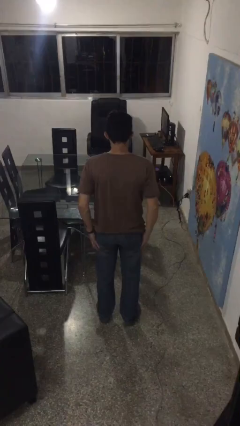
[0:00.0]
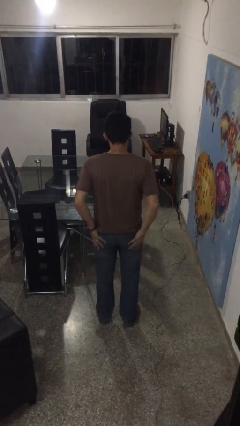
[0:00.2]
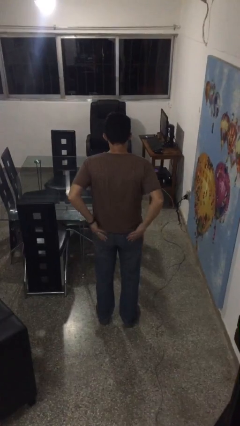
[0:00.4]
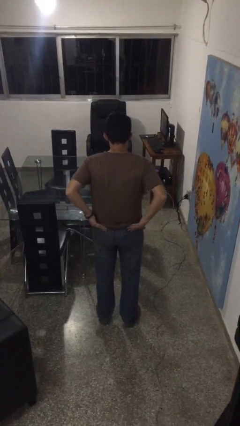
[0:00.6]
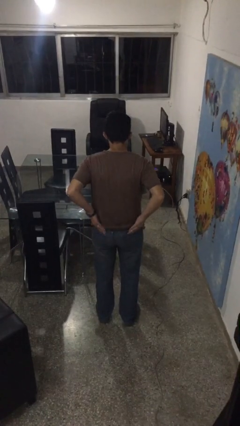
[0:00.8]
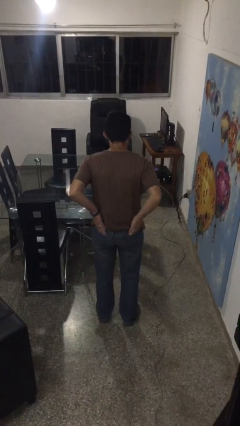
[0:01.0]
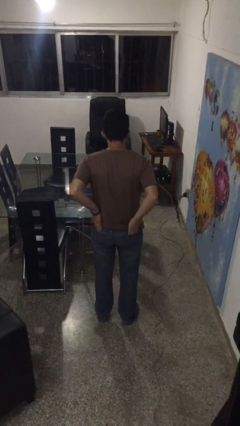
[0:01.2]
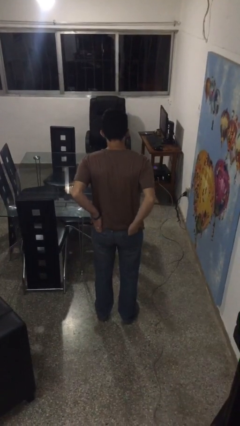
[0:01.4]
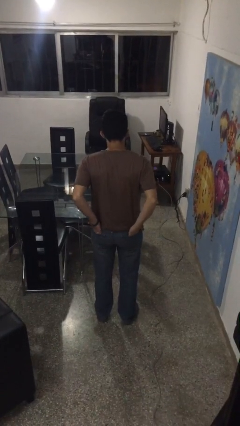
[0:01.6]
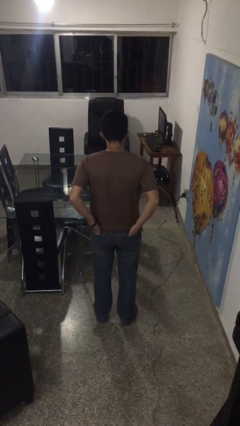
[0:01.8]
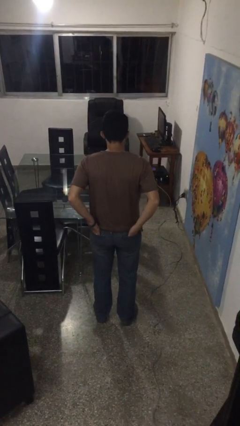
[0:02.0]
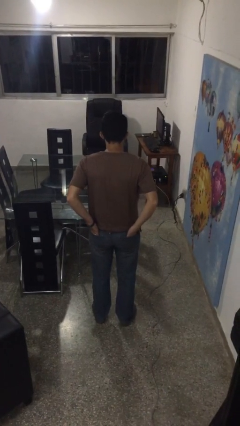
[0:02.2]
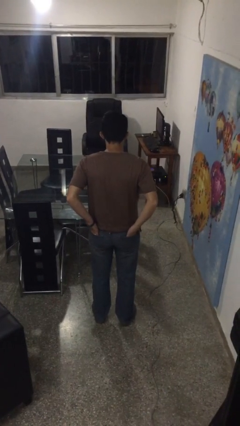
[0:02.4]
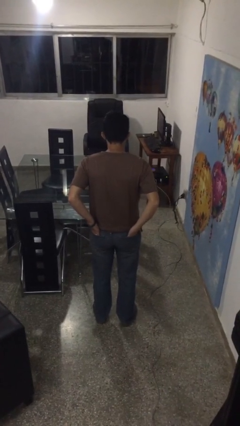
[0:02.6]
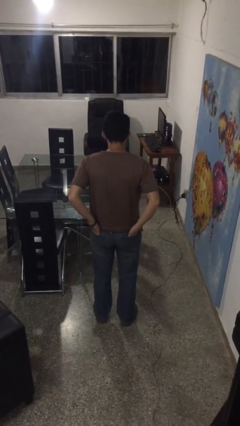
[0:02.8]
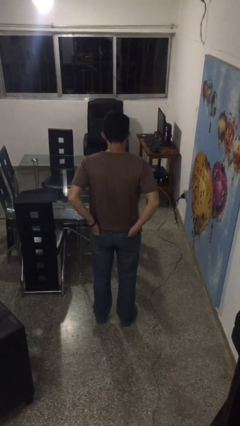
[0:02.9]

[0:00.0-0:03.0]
person puts hands in back pockets

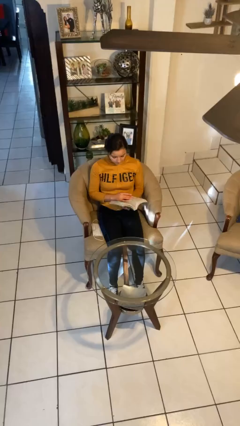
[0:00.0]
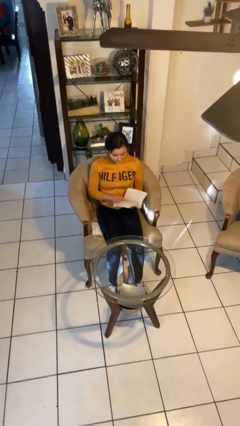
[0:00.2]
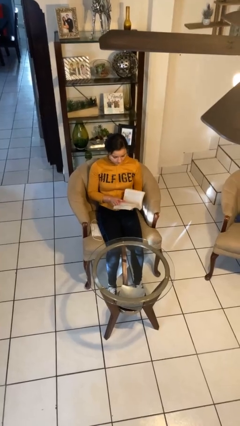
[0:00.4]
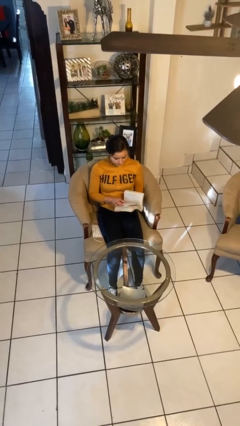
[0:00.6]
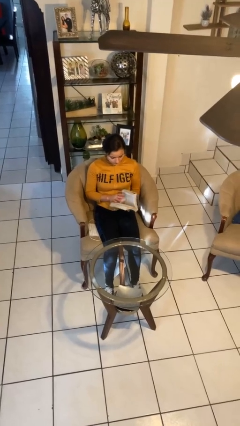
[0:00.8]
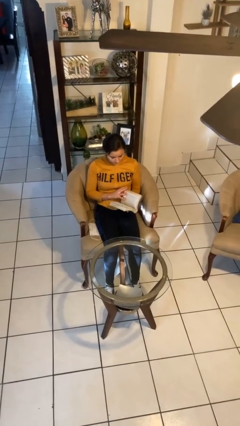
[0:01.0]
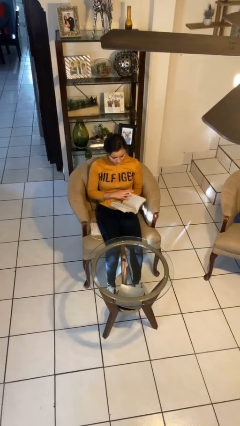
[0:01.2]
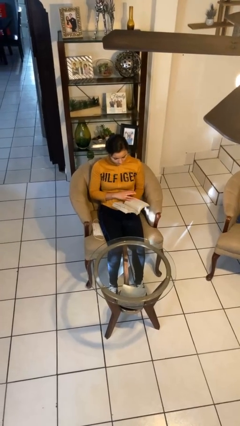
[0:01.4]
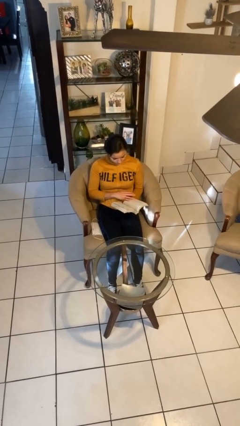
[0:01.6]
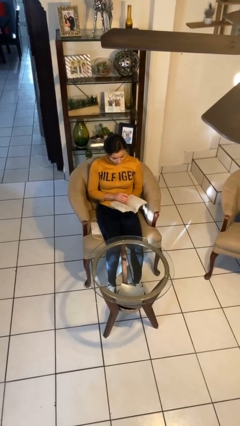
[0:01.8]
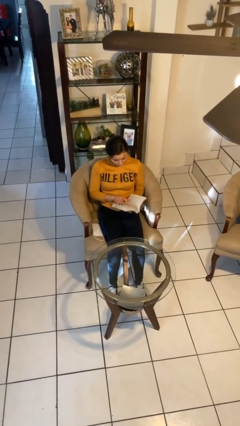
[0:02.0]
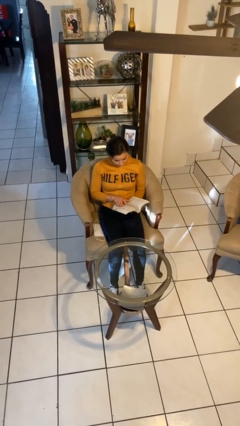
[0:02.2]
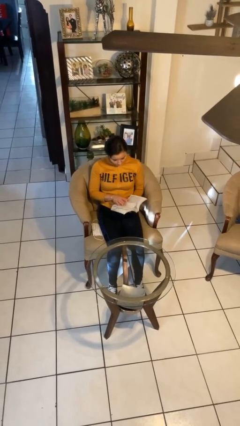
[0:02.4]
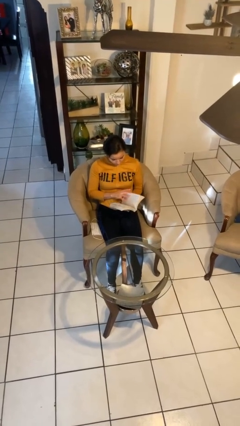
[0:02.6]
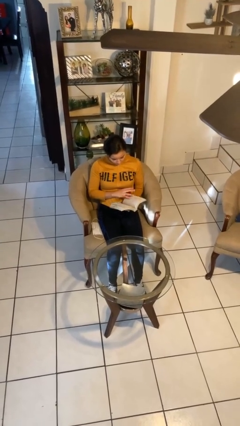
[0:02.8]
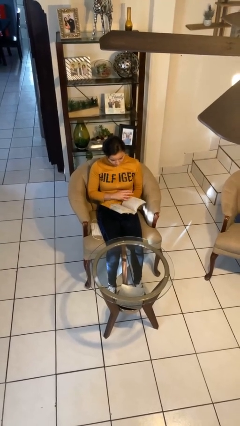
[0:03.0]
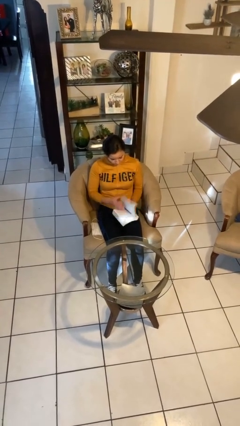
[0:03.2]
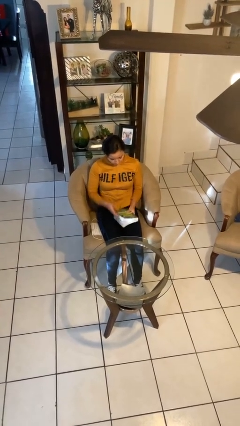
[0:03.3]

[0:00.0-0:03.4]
person reads book

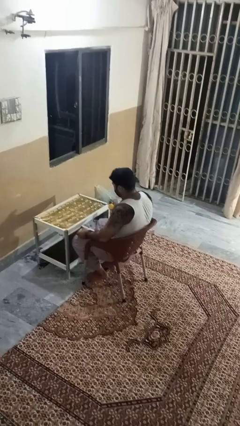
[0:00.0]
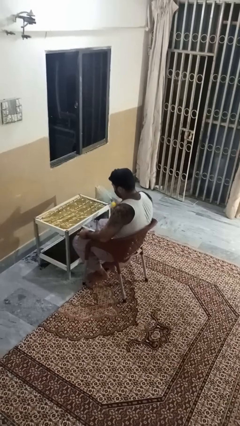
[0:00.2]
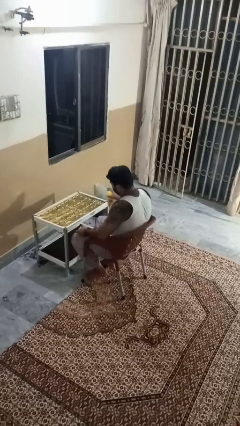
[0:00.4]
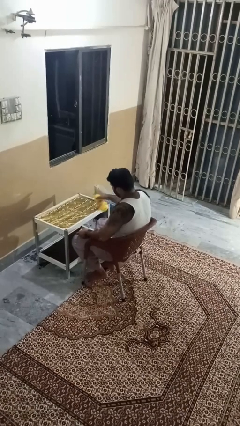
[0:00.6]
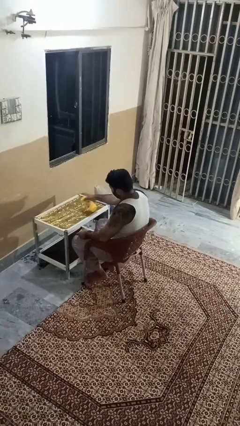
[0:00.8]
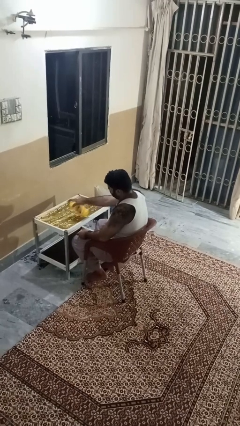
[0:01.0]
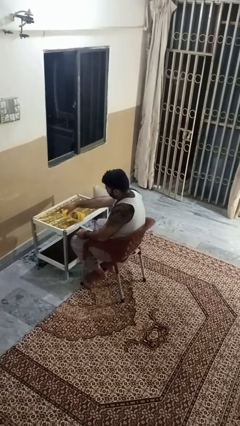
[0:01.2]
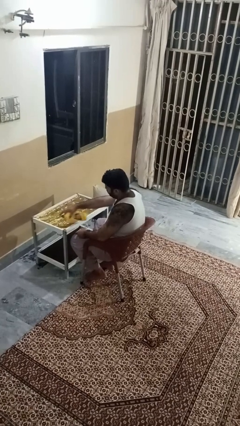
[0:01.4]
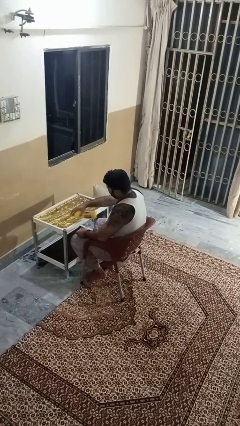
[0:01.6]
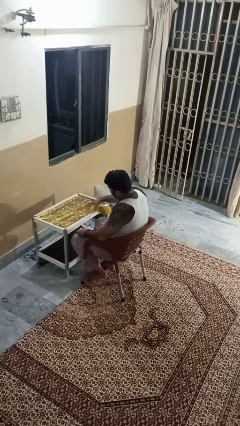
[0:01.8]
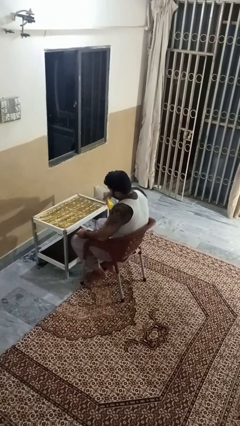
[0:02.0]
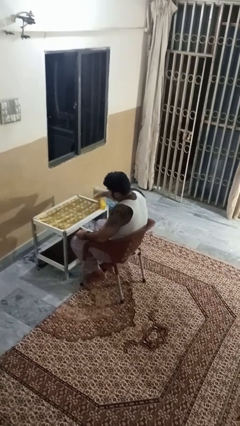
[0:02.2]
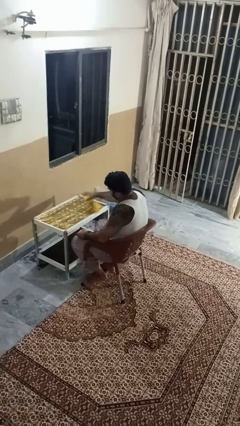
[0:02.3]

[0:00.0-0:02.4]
person sprays from bottle

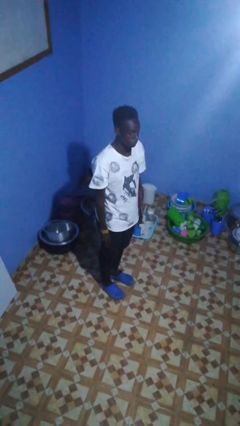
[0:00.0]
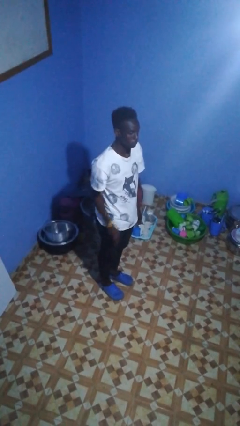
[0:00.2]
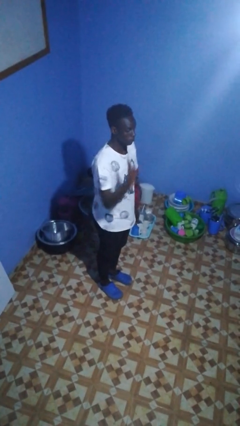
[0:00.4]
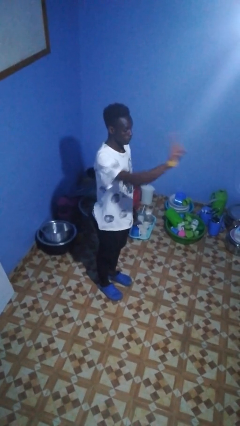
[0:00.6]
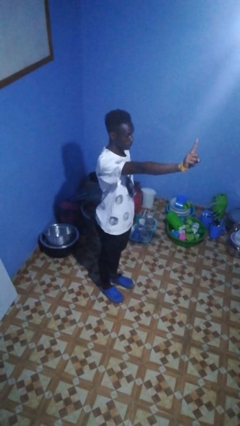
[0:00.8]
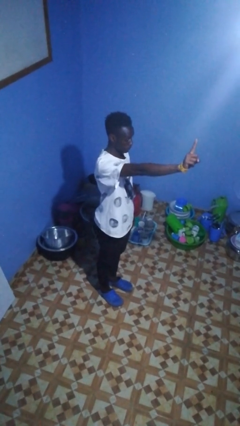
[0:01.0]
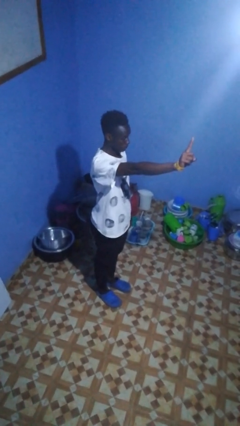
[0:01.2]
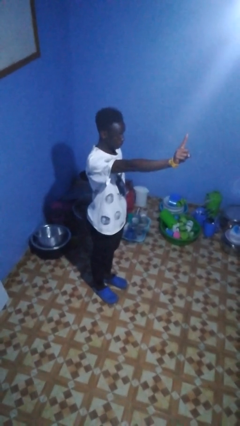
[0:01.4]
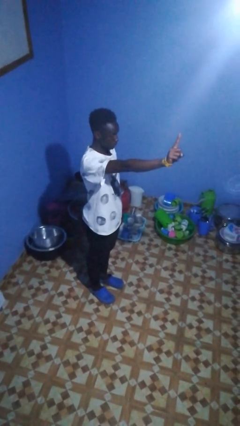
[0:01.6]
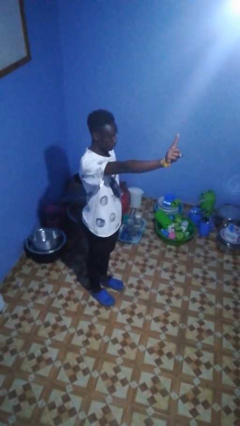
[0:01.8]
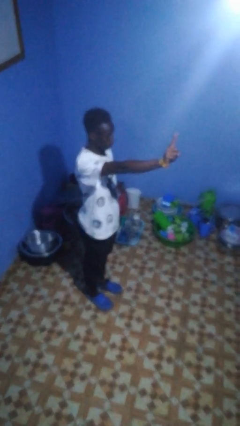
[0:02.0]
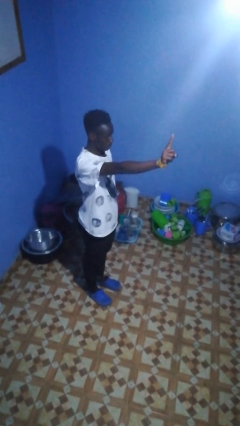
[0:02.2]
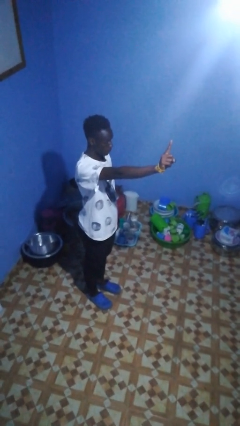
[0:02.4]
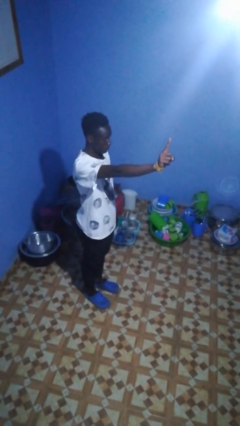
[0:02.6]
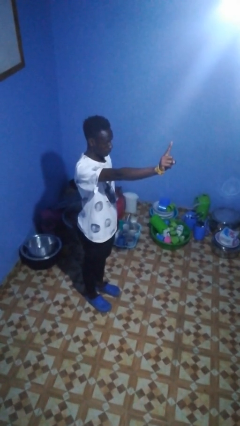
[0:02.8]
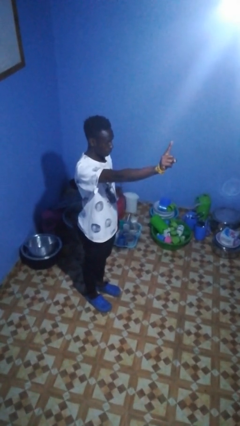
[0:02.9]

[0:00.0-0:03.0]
person gestures number one

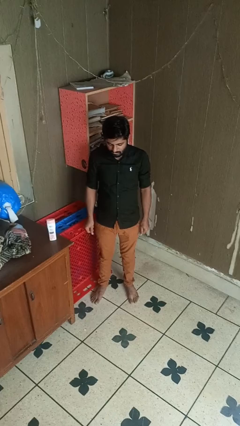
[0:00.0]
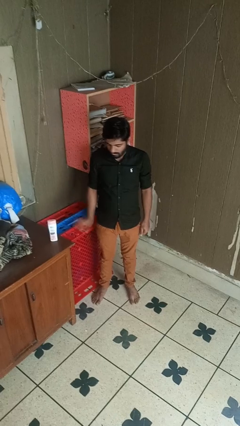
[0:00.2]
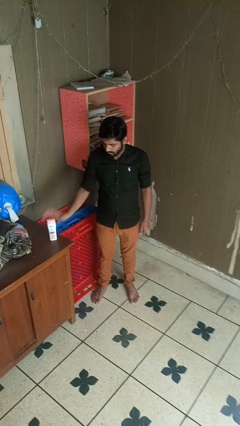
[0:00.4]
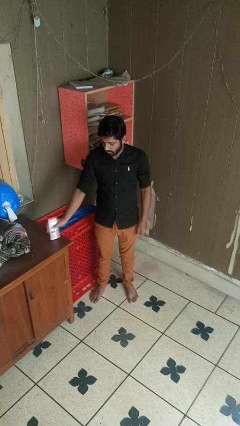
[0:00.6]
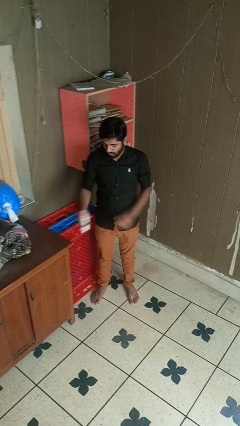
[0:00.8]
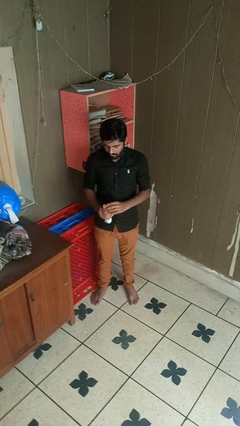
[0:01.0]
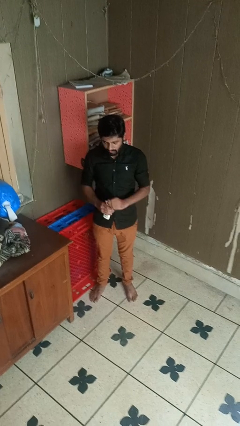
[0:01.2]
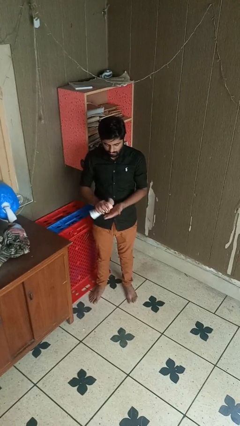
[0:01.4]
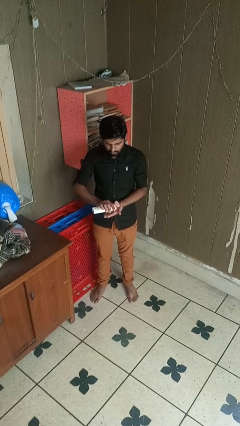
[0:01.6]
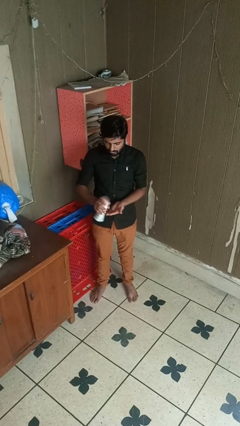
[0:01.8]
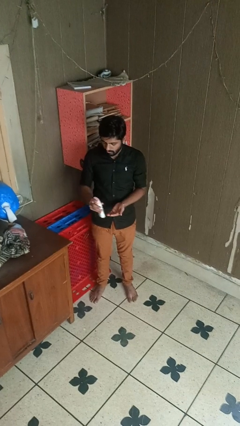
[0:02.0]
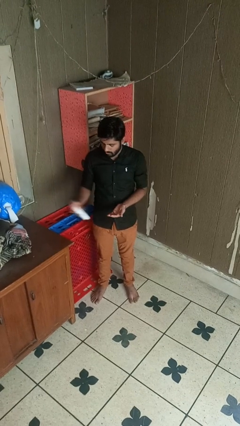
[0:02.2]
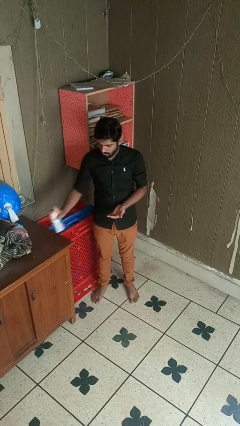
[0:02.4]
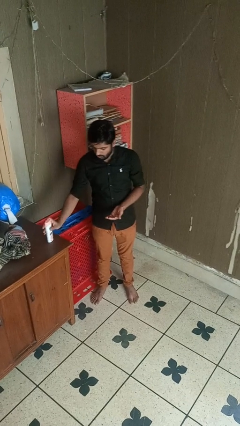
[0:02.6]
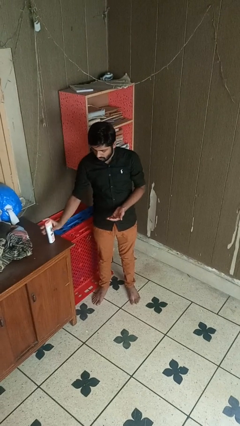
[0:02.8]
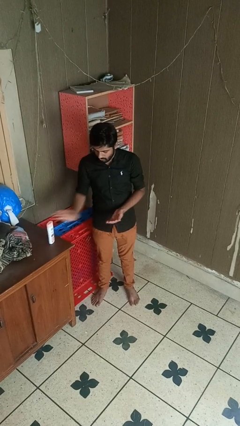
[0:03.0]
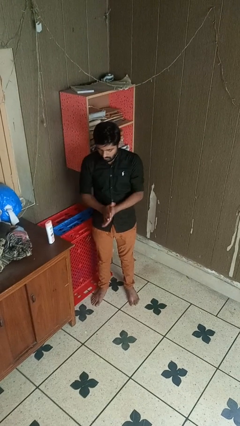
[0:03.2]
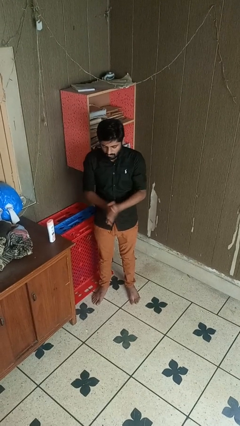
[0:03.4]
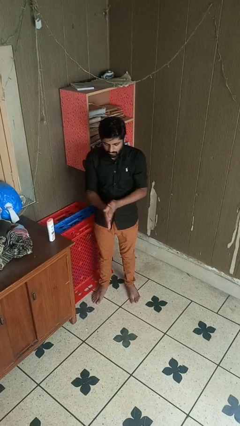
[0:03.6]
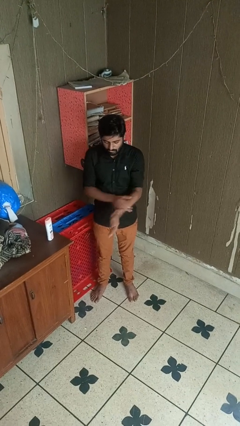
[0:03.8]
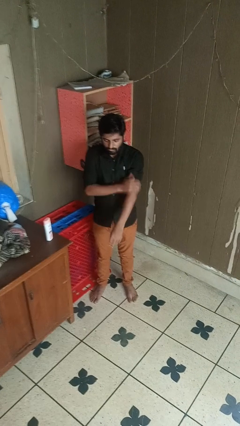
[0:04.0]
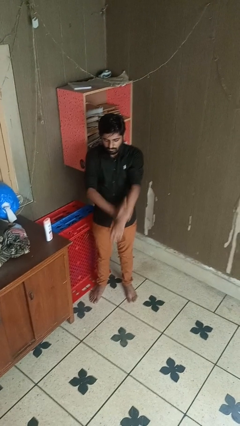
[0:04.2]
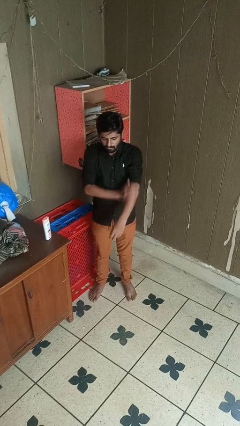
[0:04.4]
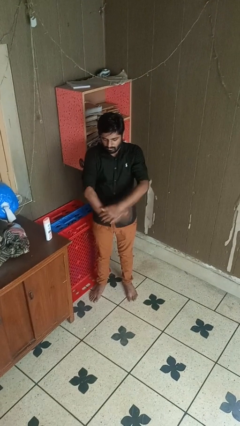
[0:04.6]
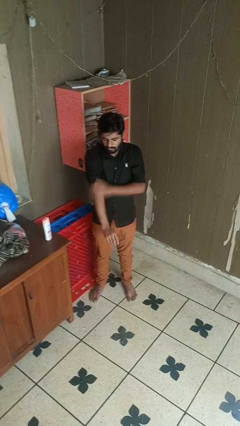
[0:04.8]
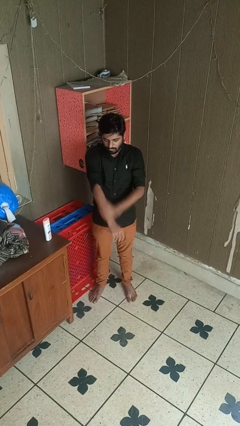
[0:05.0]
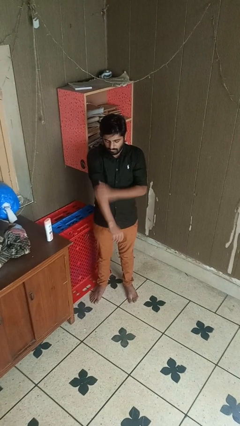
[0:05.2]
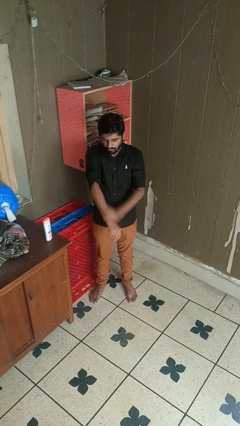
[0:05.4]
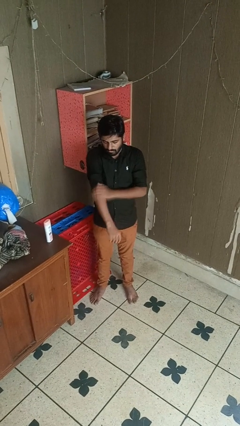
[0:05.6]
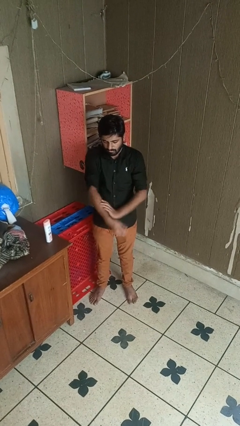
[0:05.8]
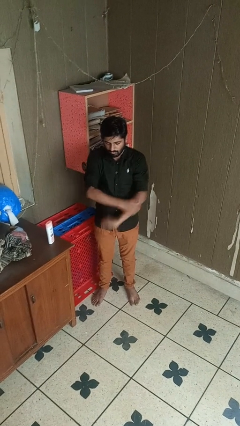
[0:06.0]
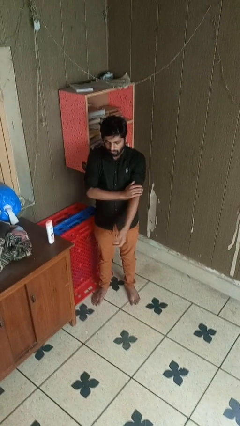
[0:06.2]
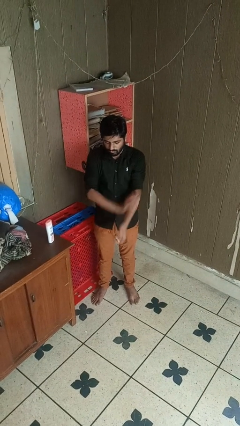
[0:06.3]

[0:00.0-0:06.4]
person applies facial moisturizer
